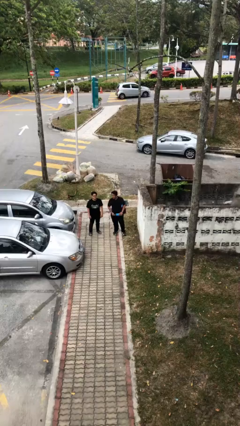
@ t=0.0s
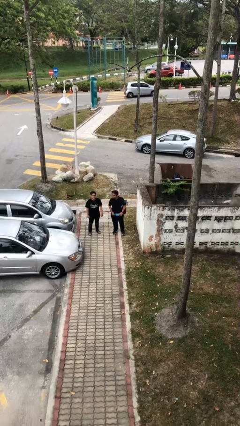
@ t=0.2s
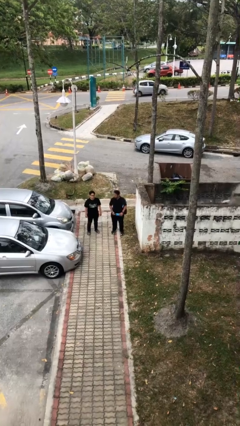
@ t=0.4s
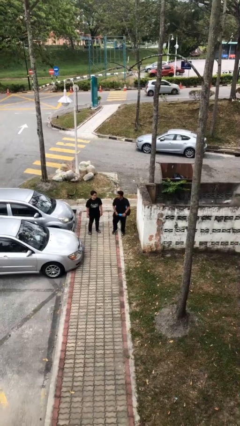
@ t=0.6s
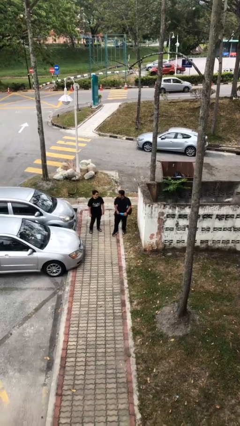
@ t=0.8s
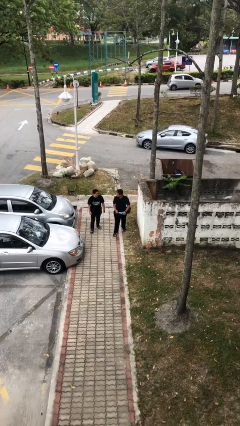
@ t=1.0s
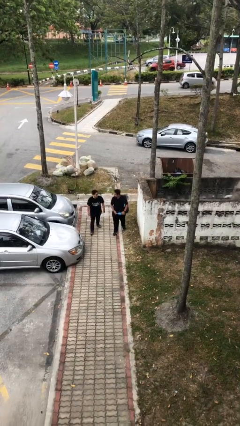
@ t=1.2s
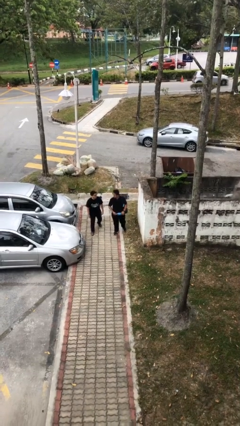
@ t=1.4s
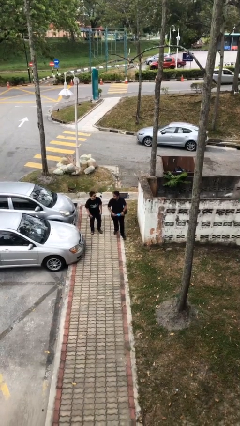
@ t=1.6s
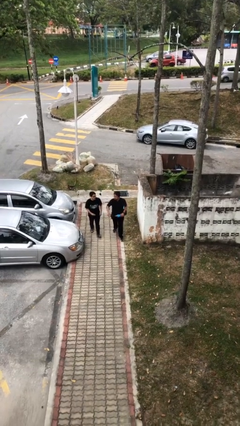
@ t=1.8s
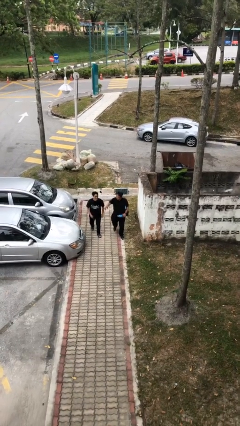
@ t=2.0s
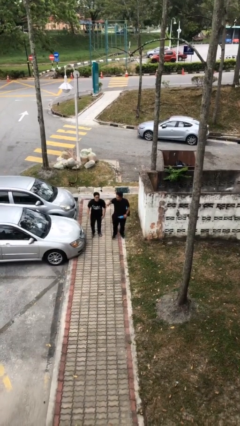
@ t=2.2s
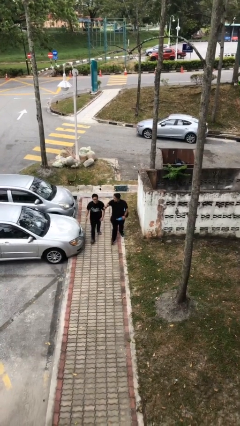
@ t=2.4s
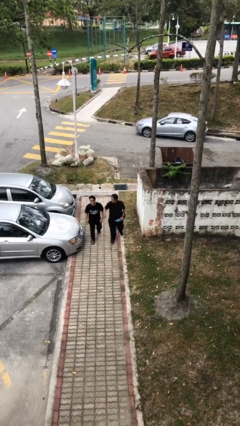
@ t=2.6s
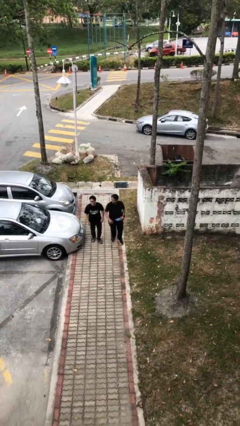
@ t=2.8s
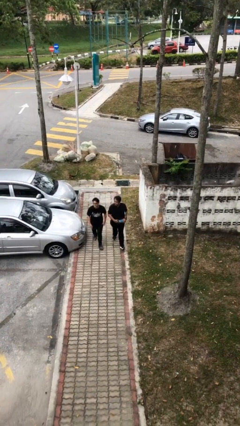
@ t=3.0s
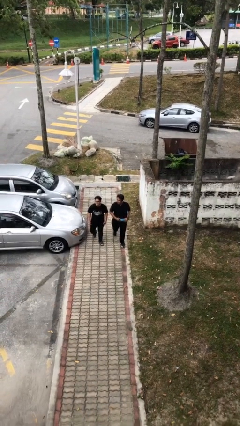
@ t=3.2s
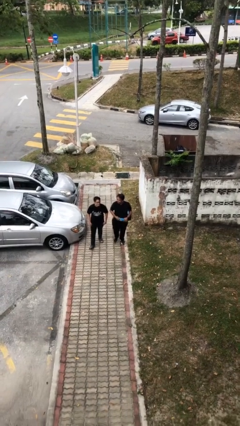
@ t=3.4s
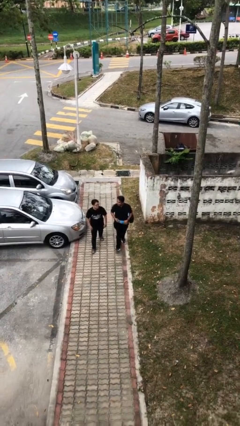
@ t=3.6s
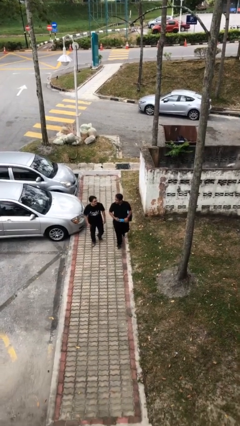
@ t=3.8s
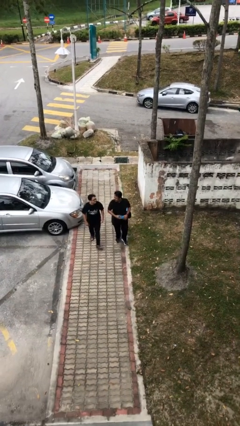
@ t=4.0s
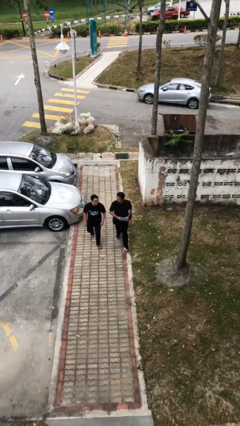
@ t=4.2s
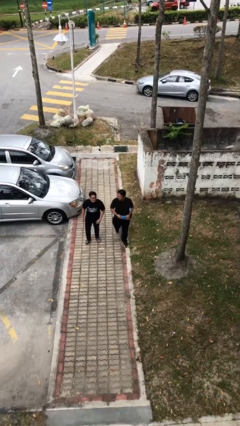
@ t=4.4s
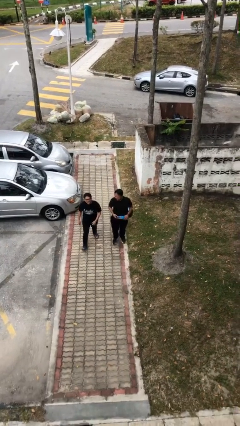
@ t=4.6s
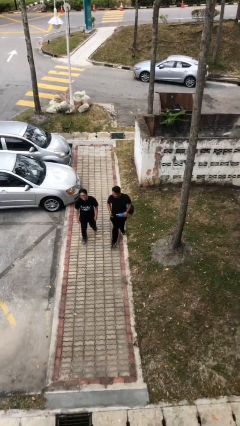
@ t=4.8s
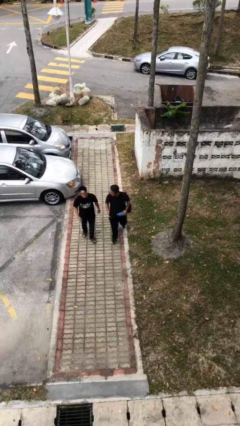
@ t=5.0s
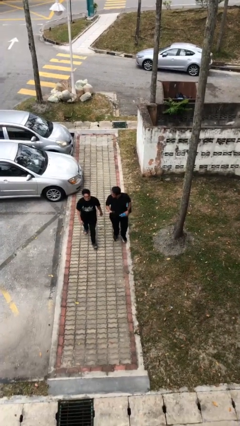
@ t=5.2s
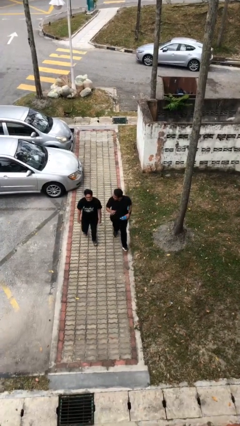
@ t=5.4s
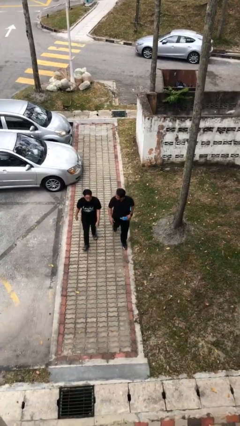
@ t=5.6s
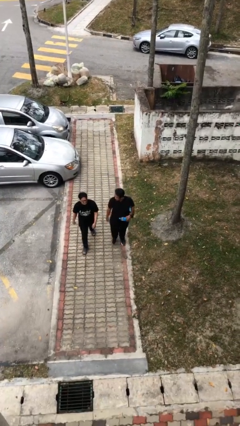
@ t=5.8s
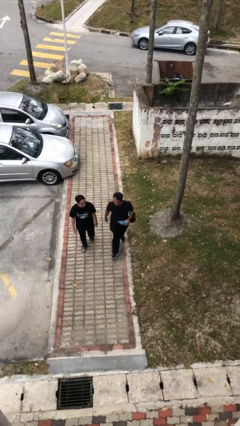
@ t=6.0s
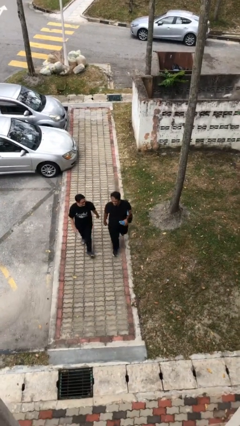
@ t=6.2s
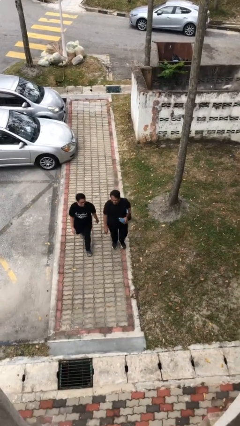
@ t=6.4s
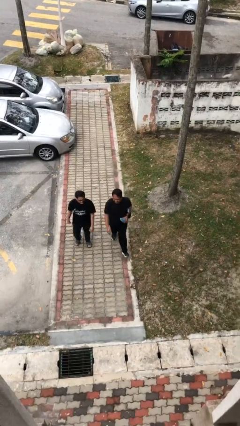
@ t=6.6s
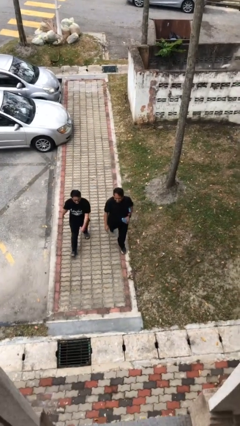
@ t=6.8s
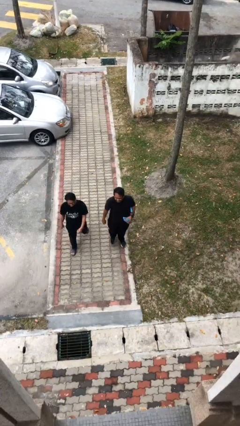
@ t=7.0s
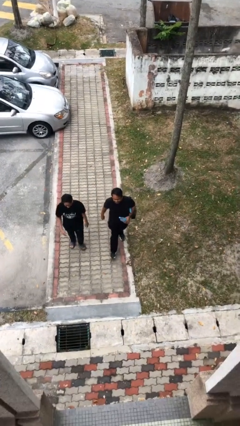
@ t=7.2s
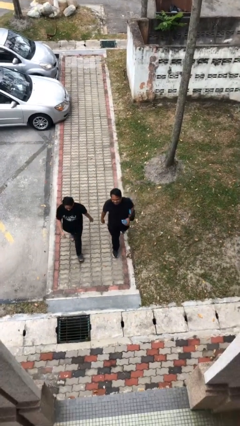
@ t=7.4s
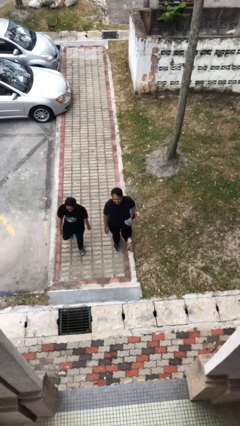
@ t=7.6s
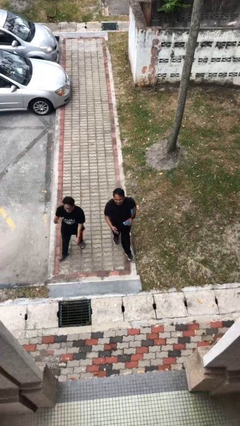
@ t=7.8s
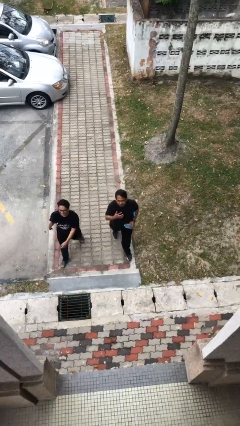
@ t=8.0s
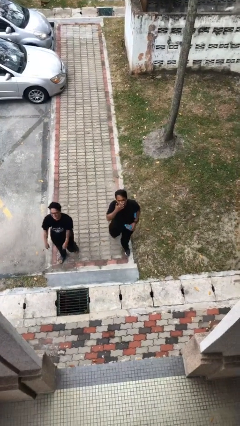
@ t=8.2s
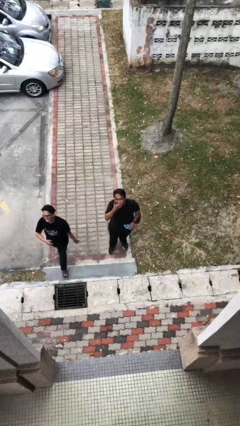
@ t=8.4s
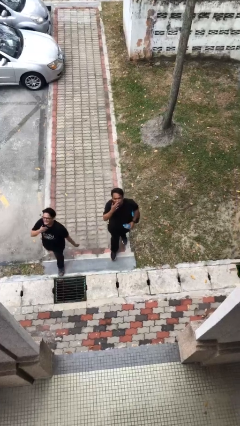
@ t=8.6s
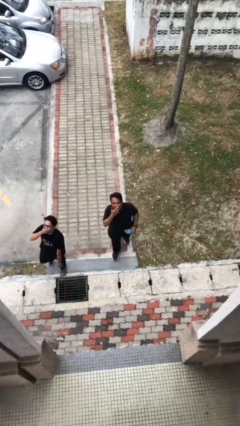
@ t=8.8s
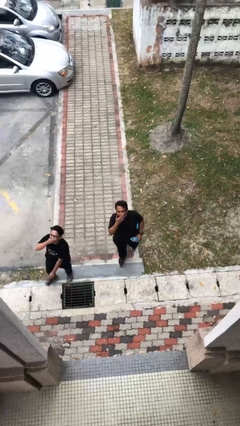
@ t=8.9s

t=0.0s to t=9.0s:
person talks to person

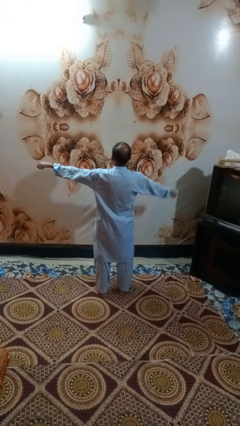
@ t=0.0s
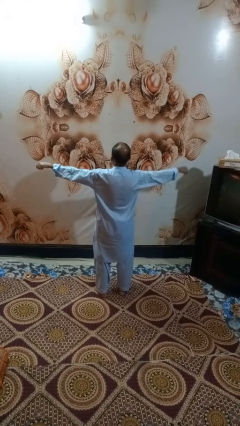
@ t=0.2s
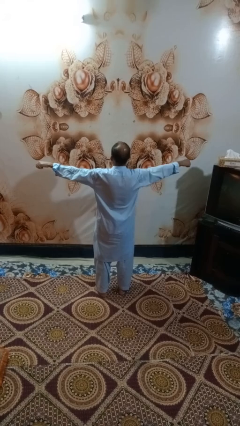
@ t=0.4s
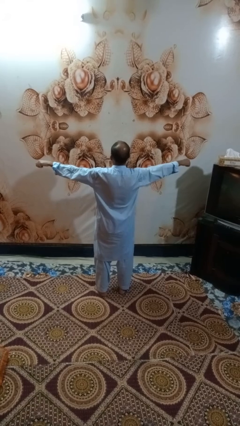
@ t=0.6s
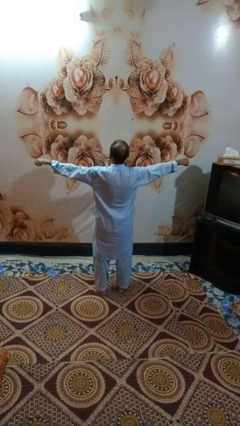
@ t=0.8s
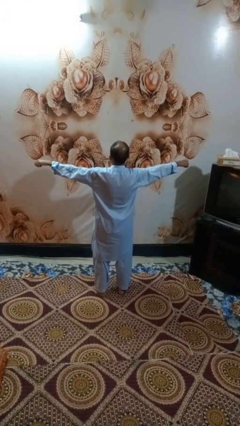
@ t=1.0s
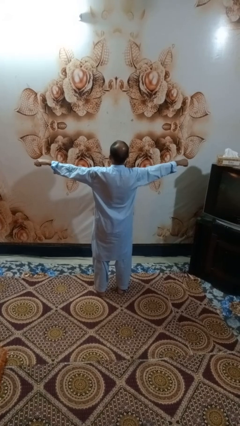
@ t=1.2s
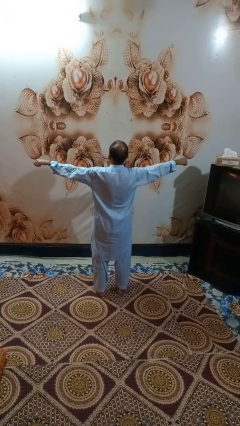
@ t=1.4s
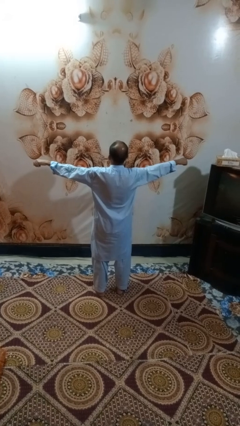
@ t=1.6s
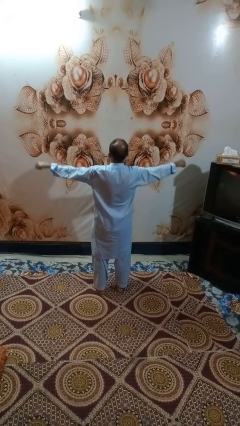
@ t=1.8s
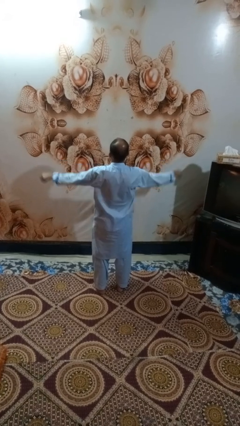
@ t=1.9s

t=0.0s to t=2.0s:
person gestures swipe right

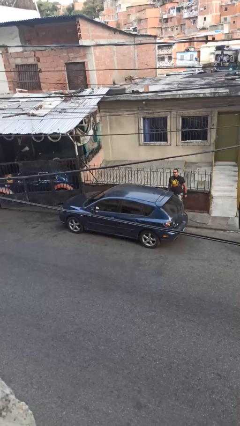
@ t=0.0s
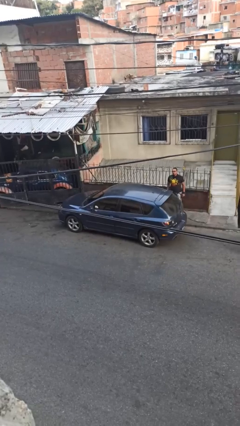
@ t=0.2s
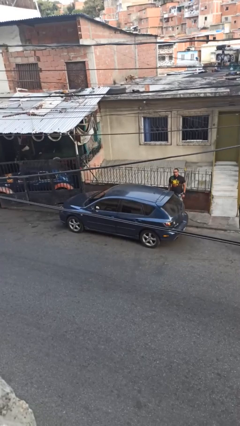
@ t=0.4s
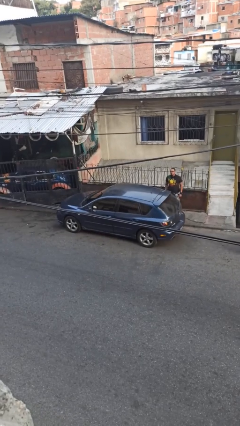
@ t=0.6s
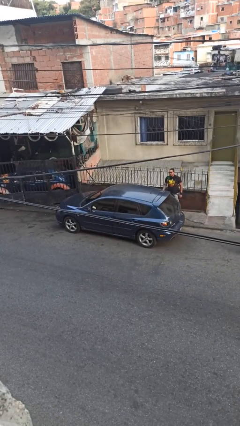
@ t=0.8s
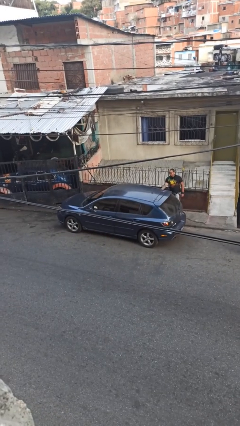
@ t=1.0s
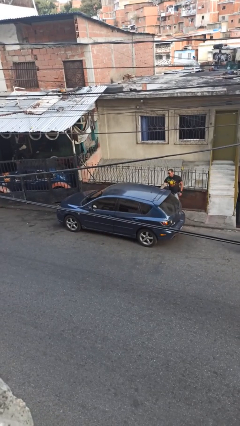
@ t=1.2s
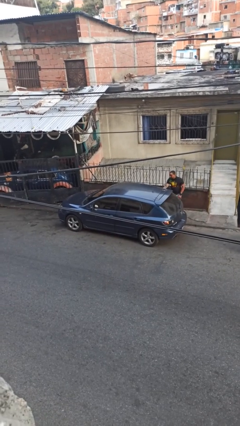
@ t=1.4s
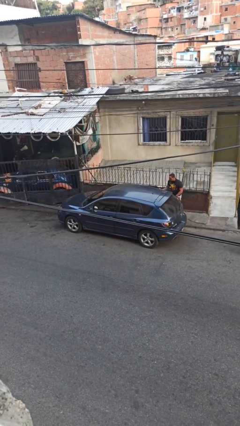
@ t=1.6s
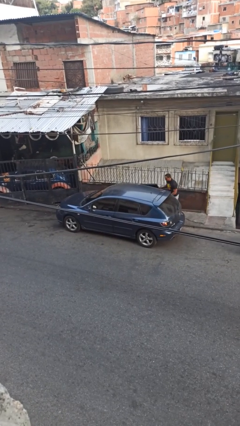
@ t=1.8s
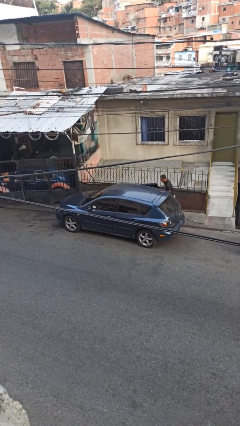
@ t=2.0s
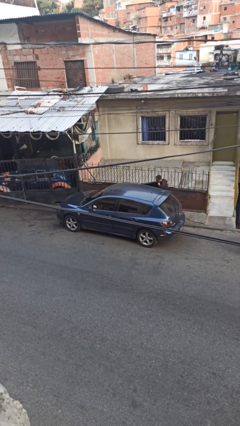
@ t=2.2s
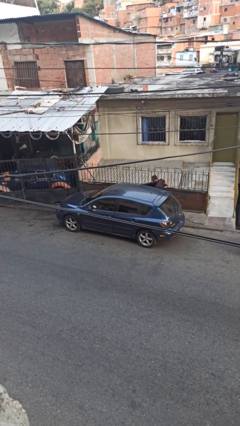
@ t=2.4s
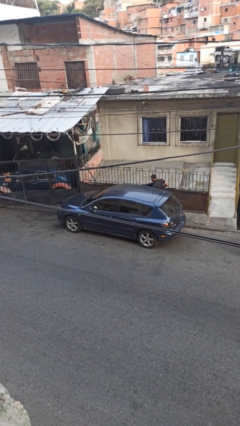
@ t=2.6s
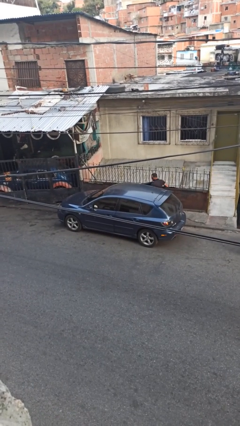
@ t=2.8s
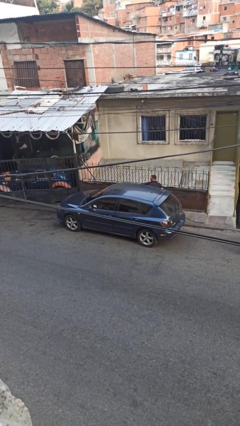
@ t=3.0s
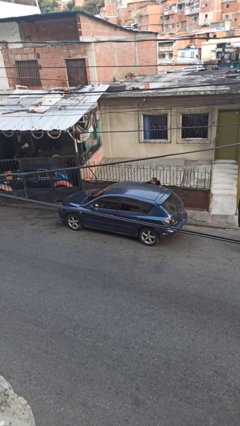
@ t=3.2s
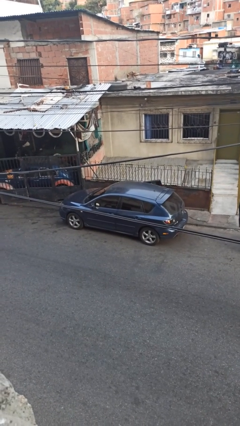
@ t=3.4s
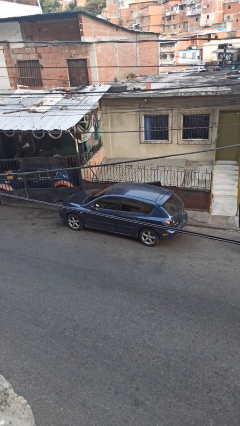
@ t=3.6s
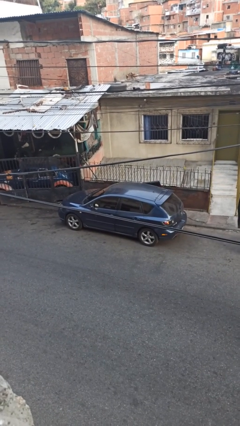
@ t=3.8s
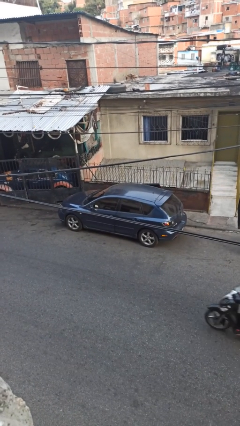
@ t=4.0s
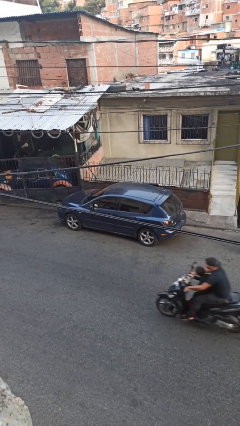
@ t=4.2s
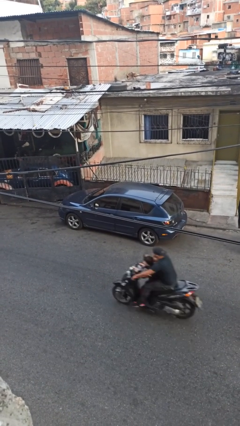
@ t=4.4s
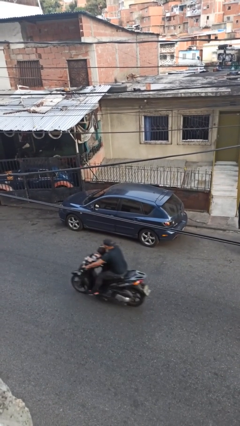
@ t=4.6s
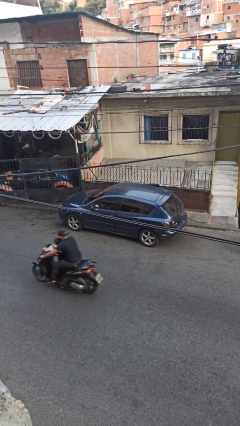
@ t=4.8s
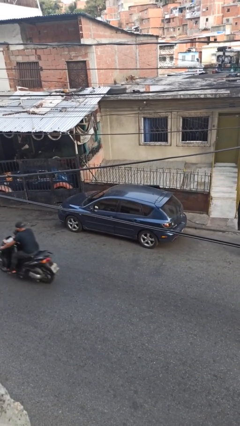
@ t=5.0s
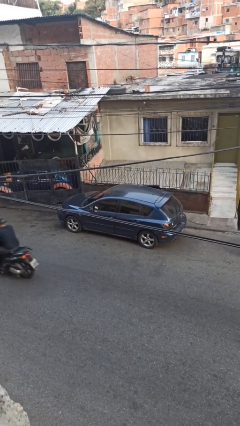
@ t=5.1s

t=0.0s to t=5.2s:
car picks up person

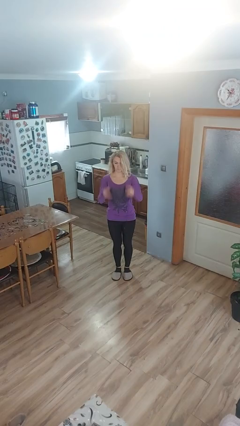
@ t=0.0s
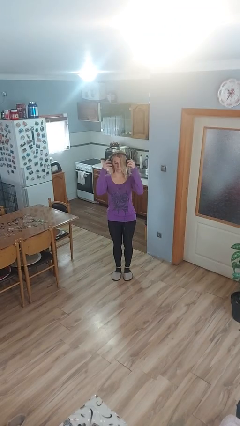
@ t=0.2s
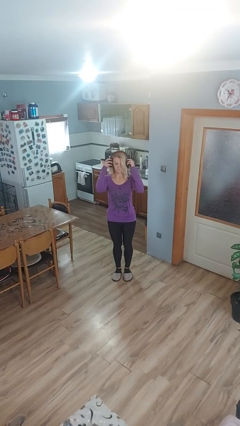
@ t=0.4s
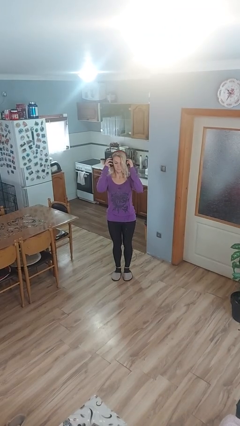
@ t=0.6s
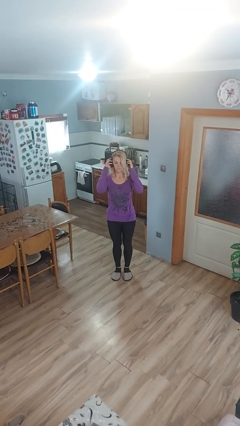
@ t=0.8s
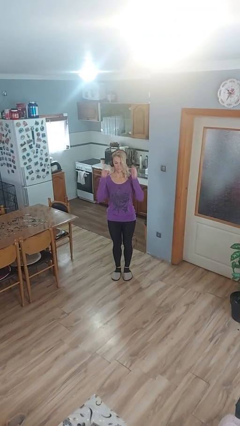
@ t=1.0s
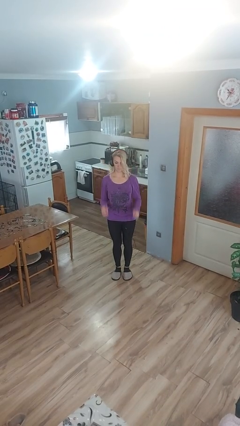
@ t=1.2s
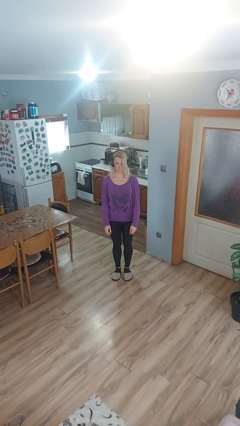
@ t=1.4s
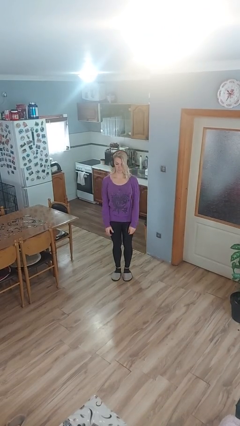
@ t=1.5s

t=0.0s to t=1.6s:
person puts on headphones
